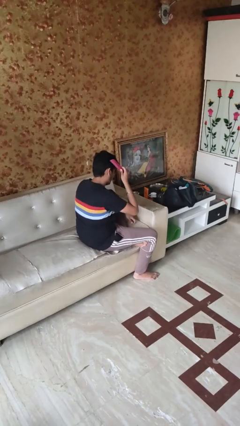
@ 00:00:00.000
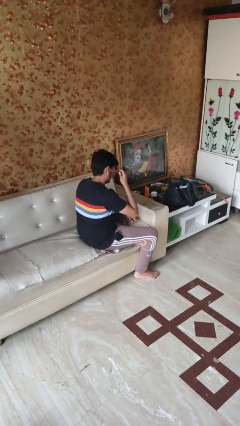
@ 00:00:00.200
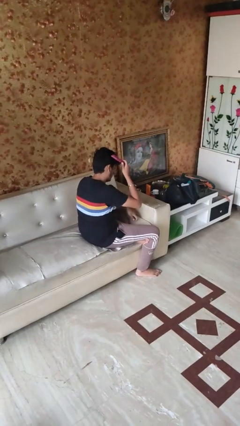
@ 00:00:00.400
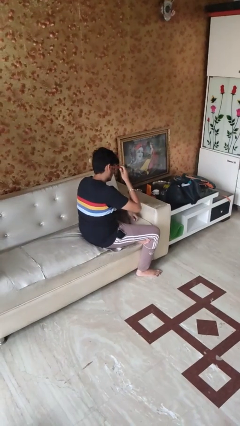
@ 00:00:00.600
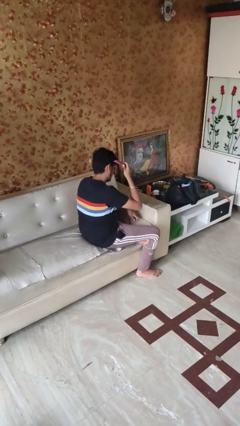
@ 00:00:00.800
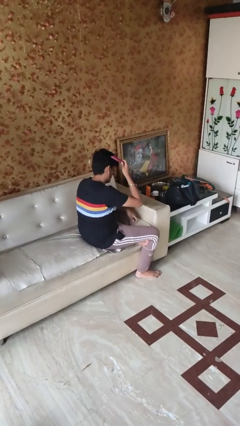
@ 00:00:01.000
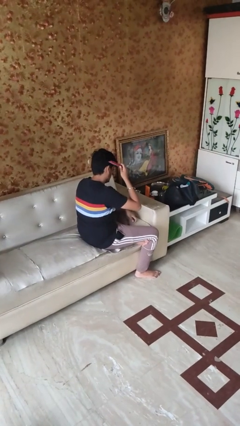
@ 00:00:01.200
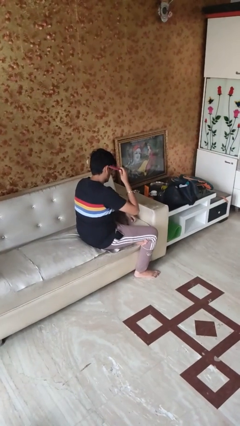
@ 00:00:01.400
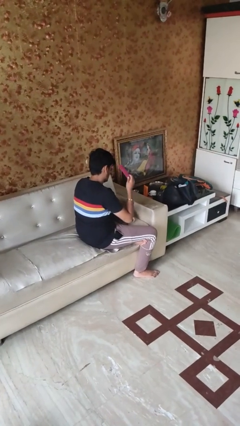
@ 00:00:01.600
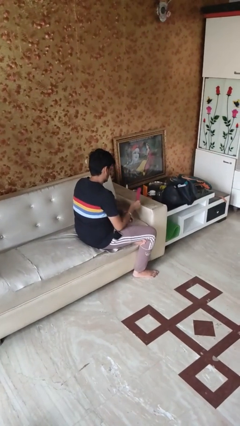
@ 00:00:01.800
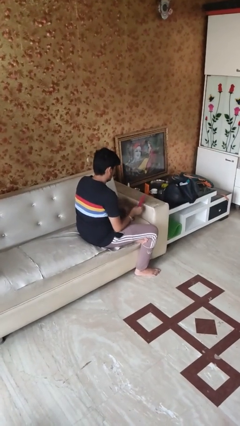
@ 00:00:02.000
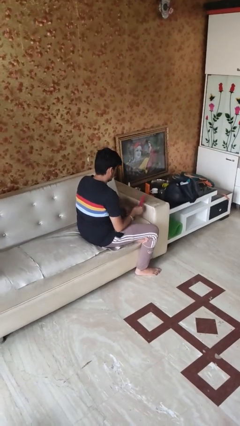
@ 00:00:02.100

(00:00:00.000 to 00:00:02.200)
person brushes hair

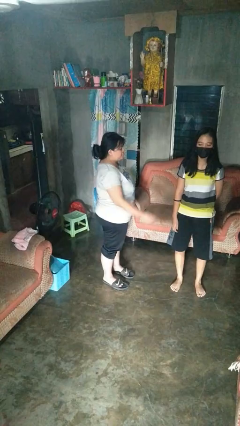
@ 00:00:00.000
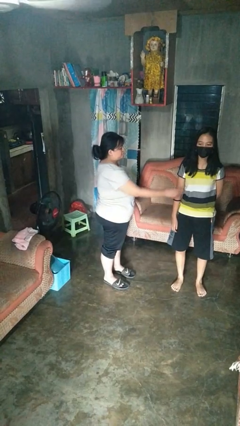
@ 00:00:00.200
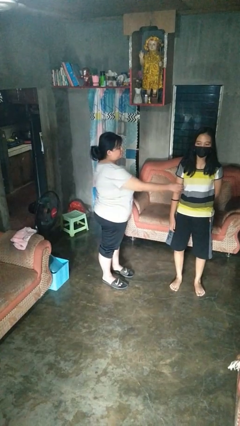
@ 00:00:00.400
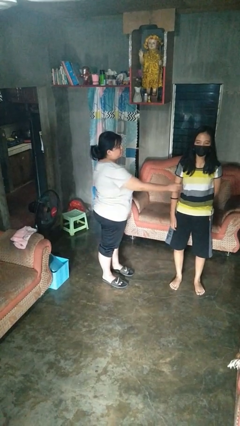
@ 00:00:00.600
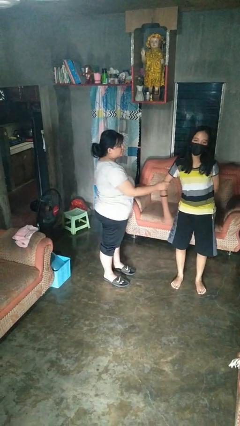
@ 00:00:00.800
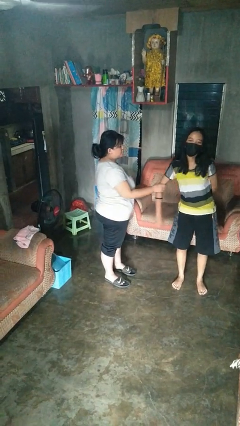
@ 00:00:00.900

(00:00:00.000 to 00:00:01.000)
person grabs person by bicep

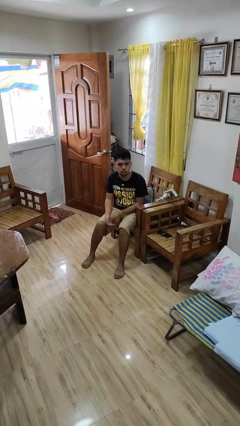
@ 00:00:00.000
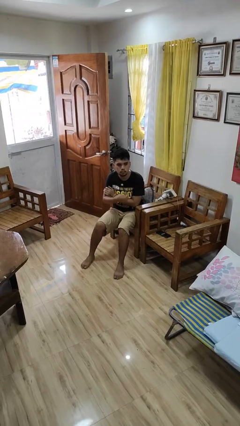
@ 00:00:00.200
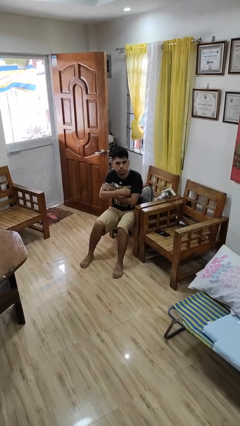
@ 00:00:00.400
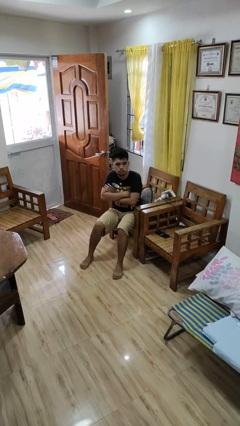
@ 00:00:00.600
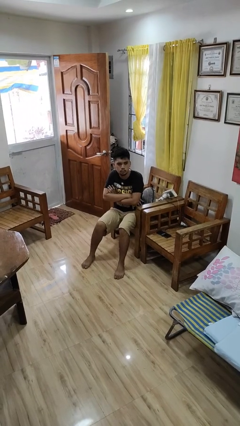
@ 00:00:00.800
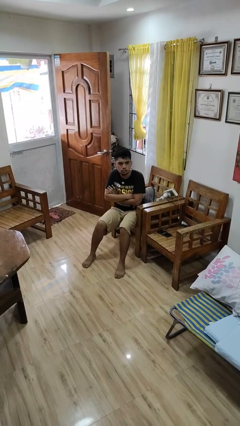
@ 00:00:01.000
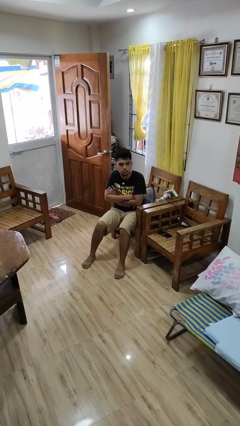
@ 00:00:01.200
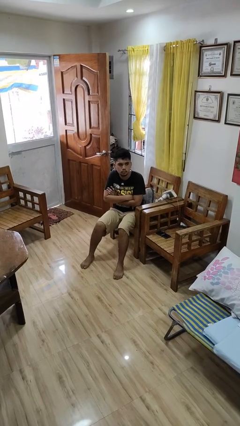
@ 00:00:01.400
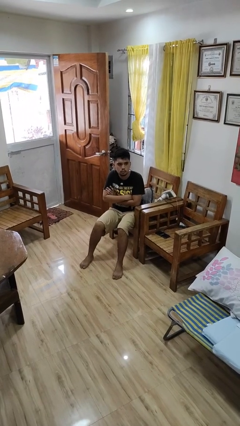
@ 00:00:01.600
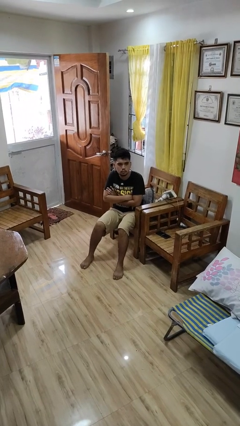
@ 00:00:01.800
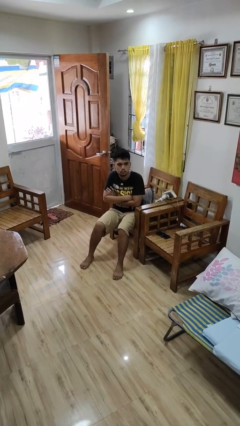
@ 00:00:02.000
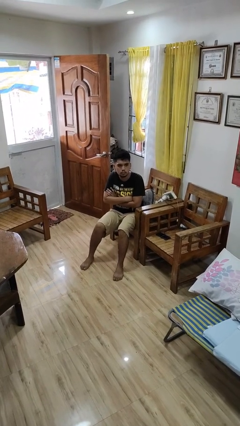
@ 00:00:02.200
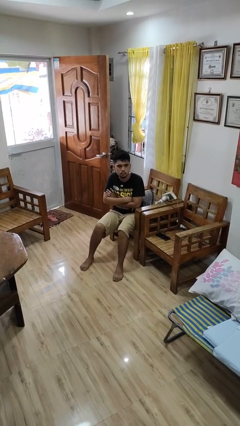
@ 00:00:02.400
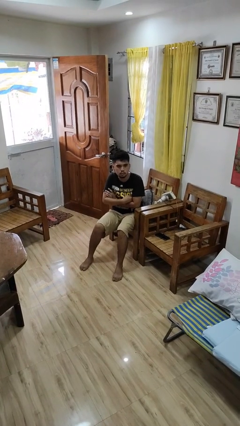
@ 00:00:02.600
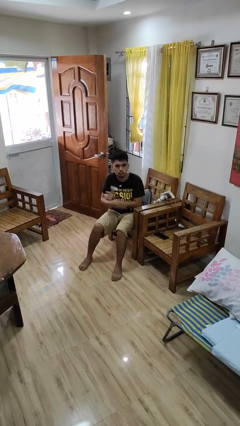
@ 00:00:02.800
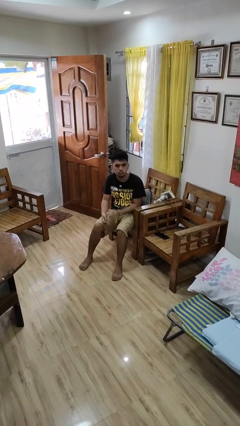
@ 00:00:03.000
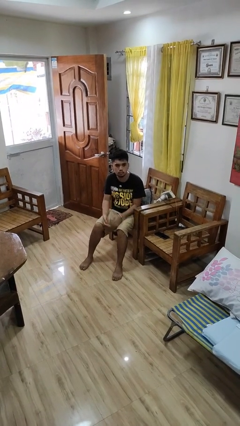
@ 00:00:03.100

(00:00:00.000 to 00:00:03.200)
person crosses arms

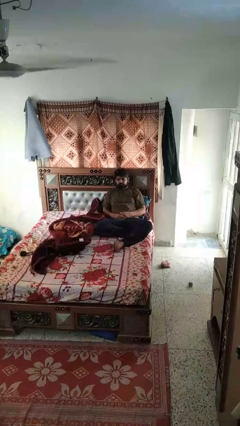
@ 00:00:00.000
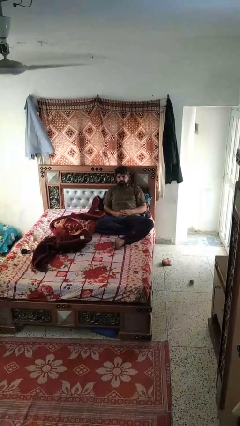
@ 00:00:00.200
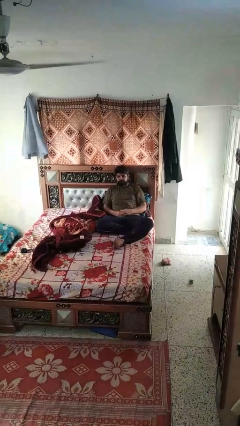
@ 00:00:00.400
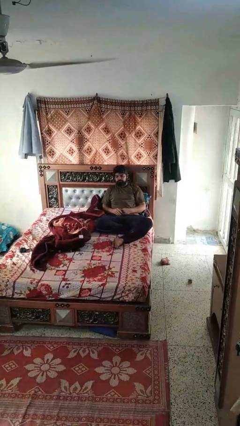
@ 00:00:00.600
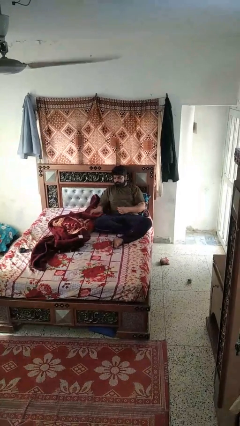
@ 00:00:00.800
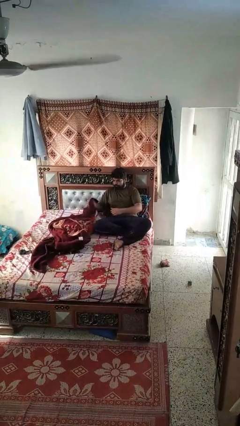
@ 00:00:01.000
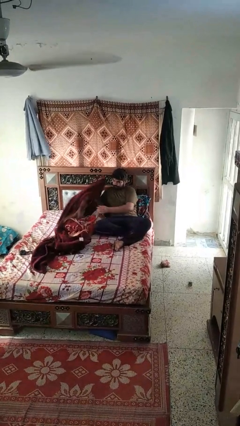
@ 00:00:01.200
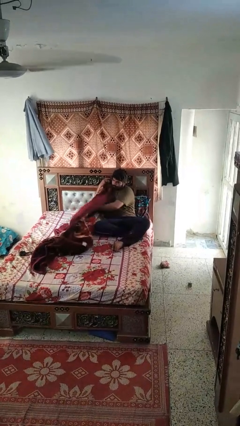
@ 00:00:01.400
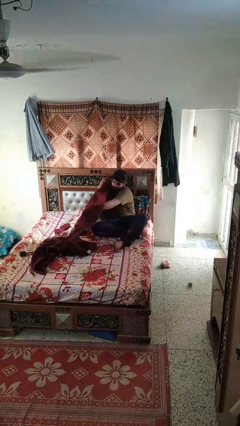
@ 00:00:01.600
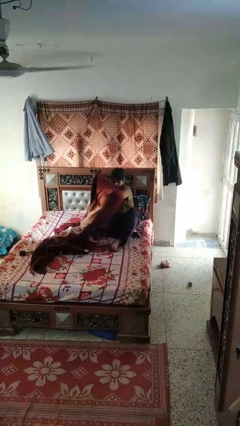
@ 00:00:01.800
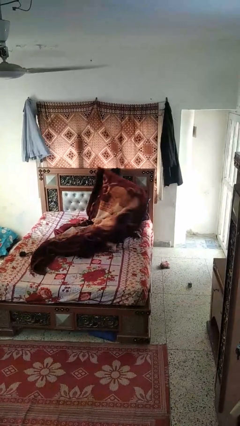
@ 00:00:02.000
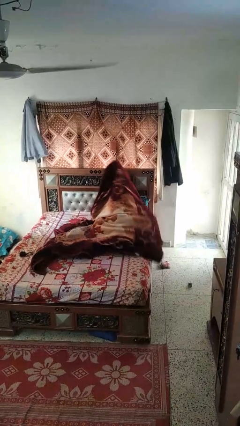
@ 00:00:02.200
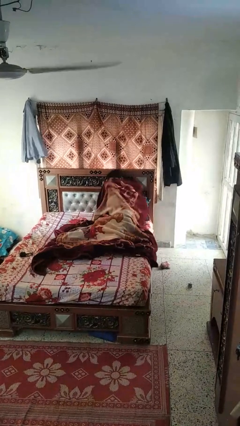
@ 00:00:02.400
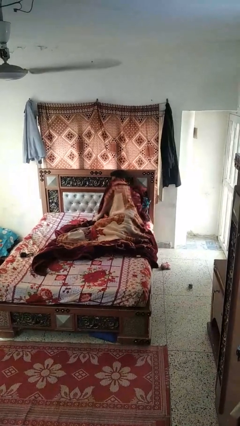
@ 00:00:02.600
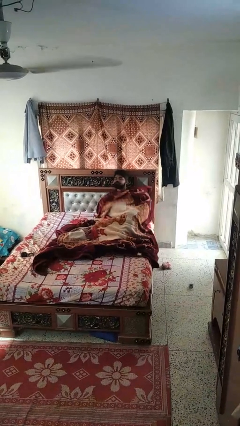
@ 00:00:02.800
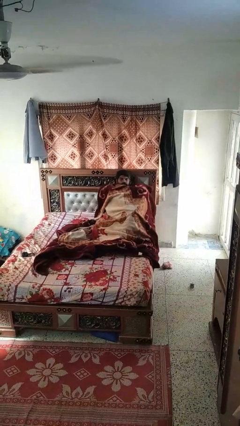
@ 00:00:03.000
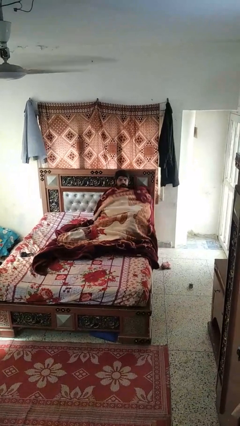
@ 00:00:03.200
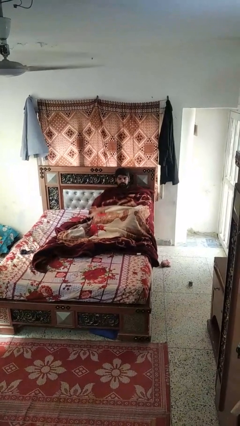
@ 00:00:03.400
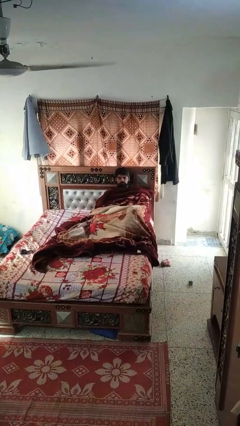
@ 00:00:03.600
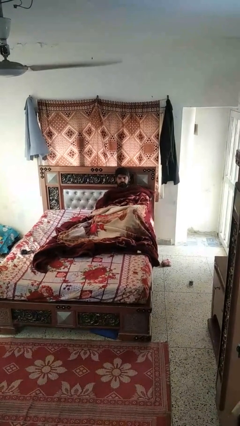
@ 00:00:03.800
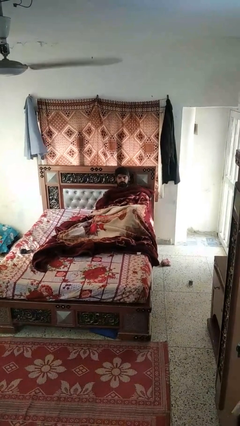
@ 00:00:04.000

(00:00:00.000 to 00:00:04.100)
person covers with blanket

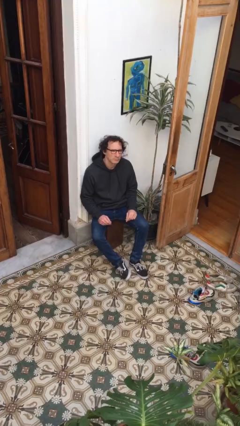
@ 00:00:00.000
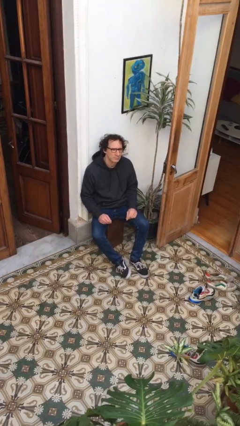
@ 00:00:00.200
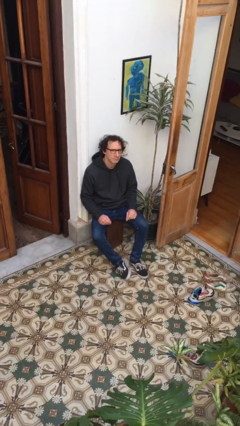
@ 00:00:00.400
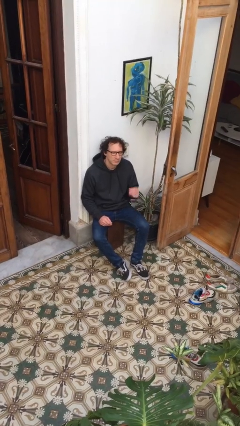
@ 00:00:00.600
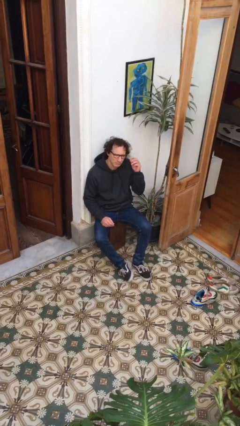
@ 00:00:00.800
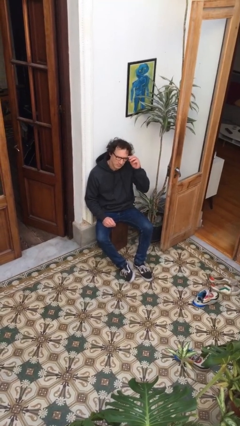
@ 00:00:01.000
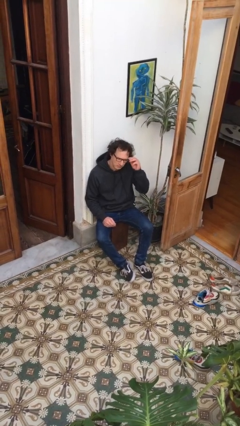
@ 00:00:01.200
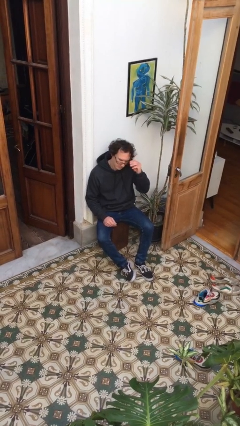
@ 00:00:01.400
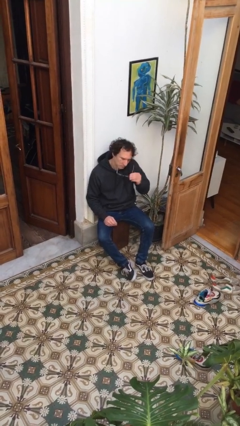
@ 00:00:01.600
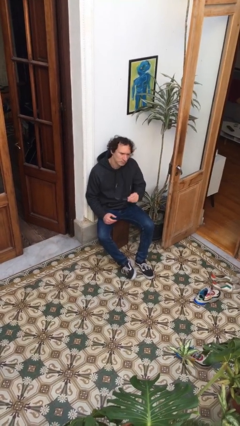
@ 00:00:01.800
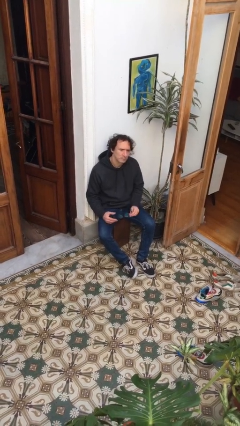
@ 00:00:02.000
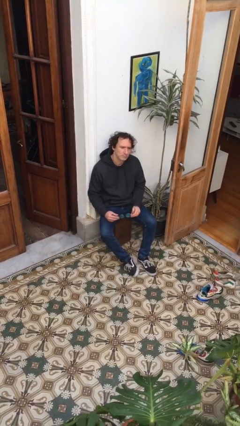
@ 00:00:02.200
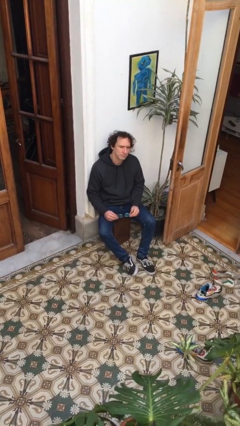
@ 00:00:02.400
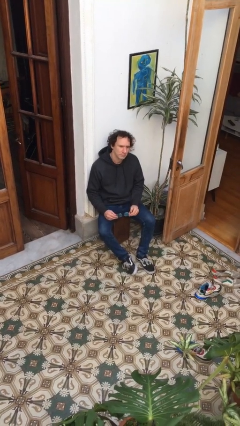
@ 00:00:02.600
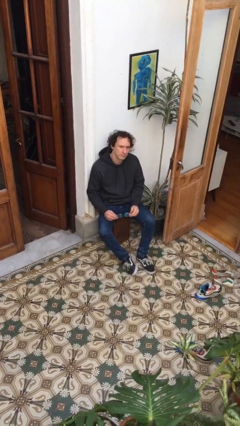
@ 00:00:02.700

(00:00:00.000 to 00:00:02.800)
person takes off glasses

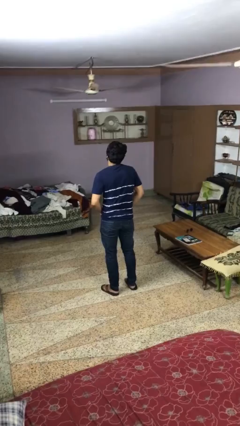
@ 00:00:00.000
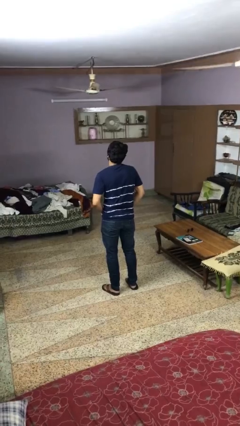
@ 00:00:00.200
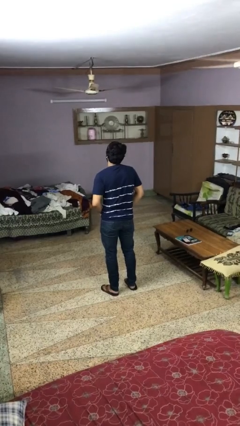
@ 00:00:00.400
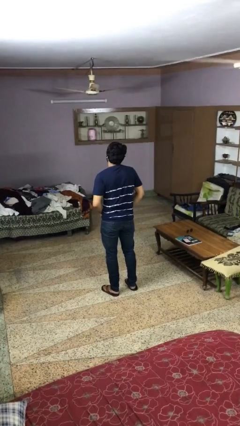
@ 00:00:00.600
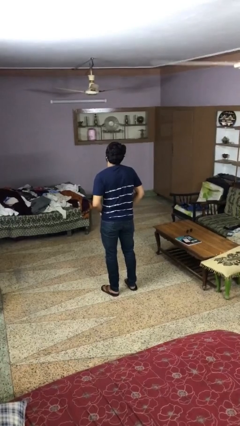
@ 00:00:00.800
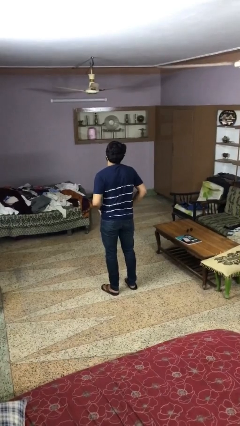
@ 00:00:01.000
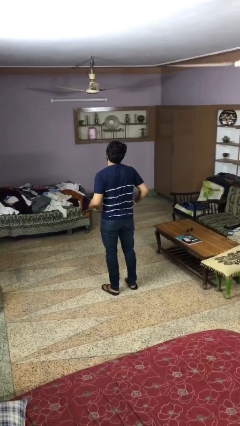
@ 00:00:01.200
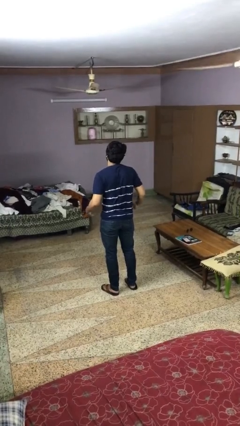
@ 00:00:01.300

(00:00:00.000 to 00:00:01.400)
person puts hands in back pockets

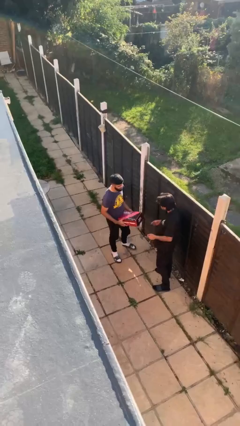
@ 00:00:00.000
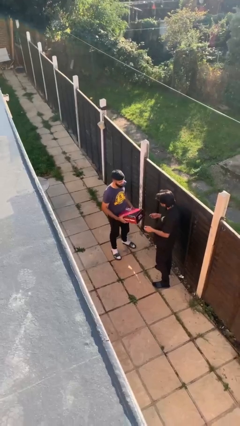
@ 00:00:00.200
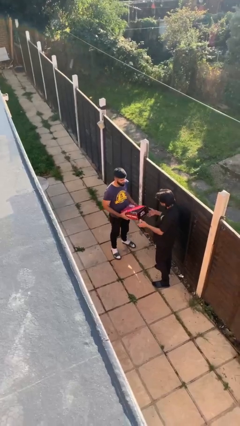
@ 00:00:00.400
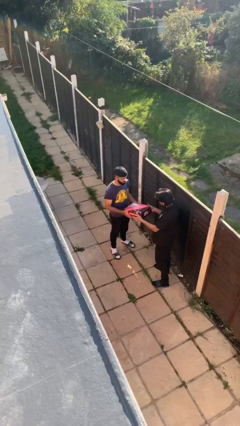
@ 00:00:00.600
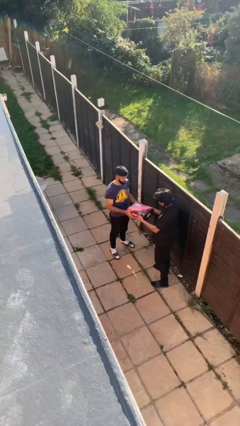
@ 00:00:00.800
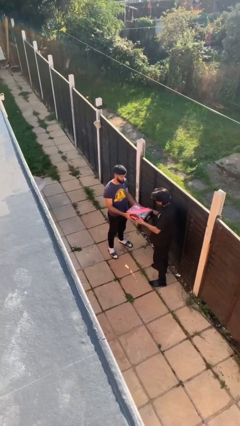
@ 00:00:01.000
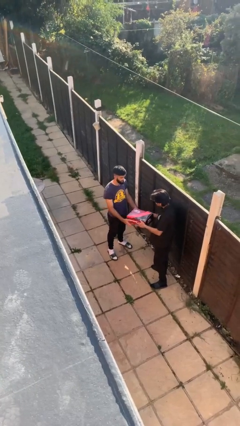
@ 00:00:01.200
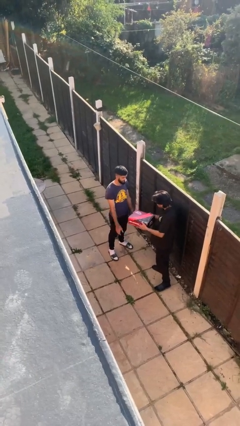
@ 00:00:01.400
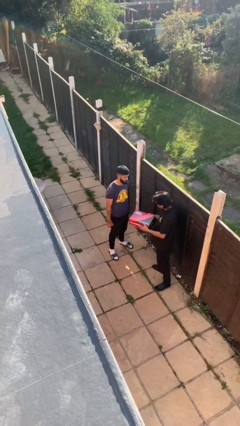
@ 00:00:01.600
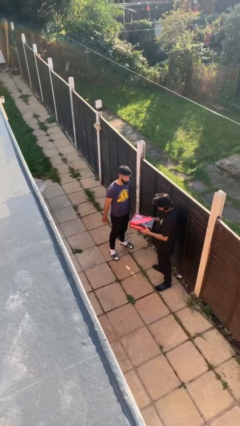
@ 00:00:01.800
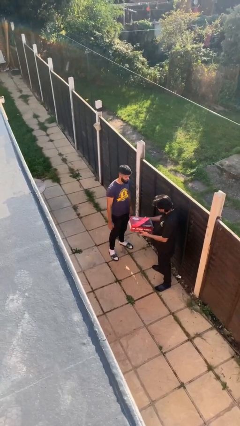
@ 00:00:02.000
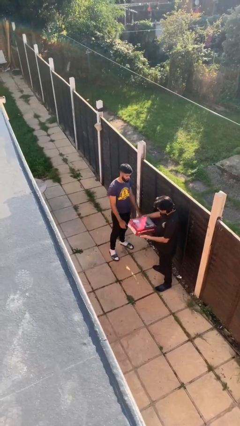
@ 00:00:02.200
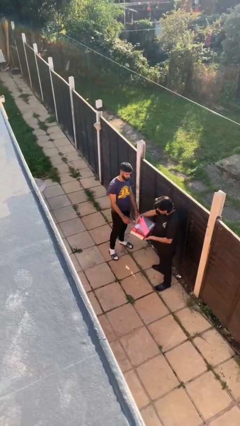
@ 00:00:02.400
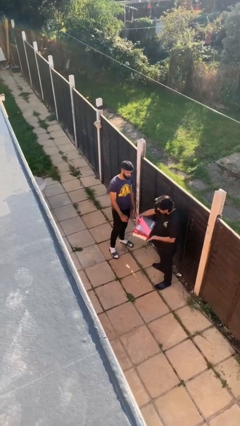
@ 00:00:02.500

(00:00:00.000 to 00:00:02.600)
person transfers object to person
